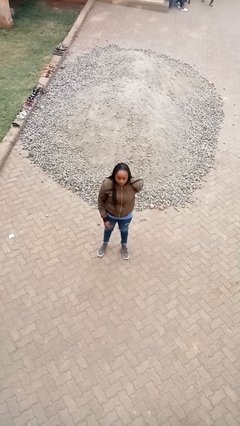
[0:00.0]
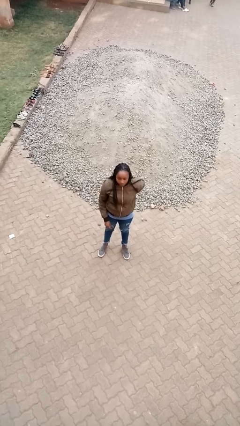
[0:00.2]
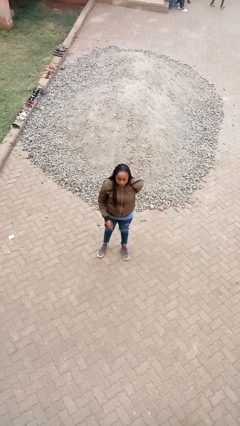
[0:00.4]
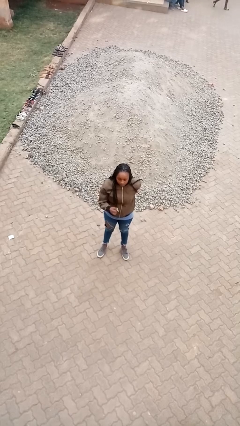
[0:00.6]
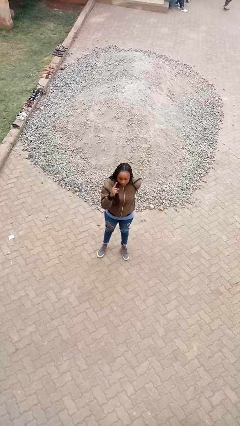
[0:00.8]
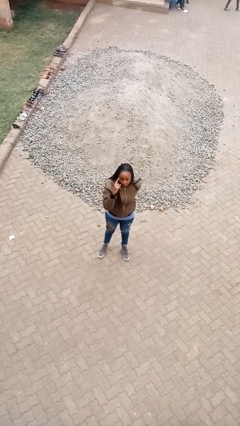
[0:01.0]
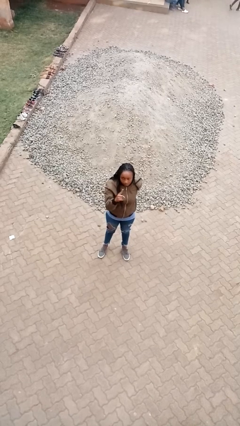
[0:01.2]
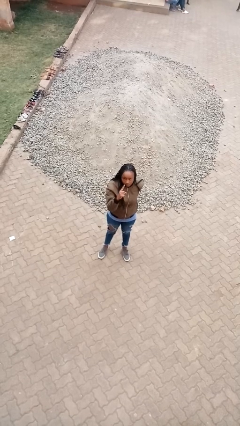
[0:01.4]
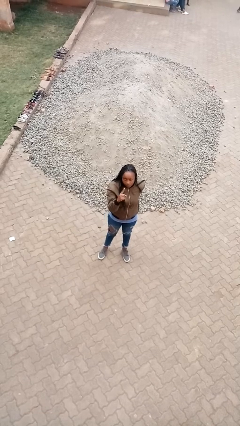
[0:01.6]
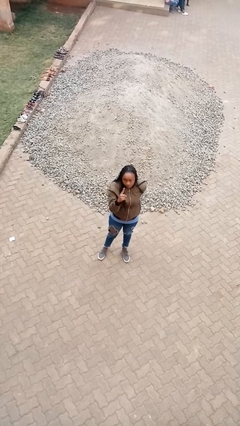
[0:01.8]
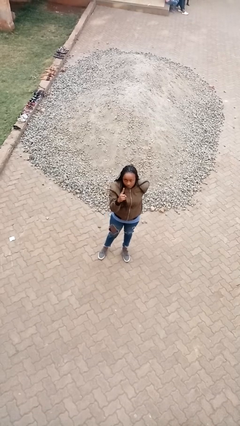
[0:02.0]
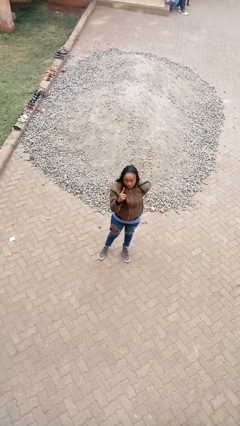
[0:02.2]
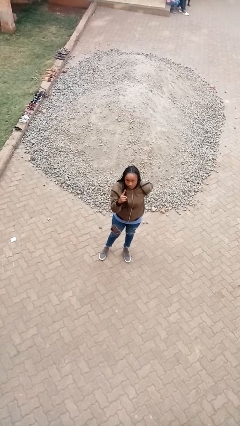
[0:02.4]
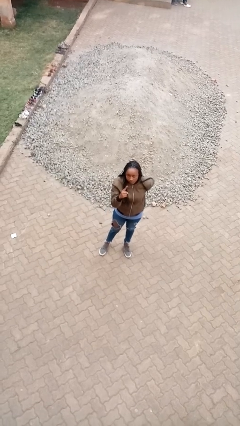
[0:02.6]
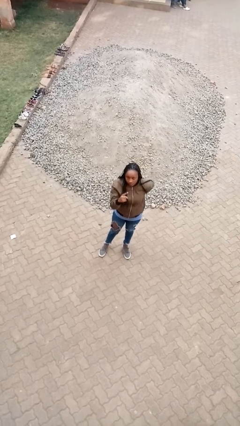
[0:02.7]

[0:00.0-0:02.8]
person gestures number one

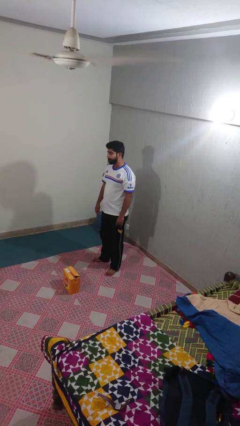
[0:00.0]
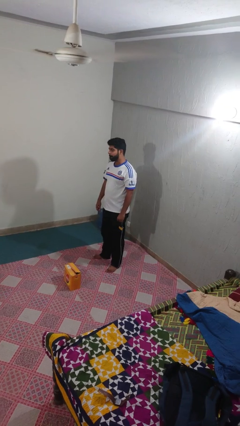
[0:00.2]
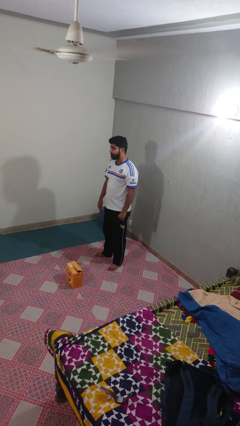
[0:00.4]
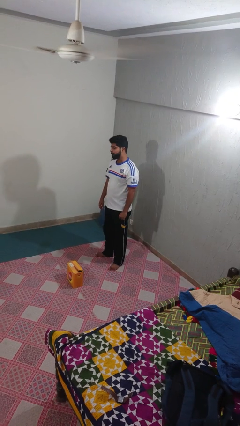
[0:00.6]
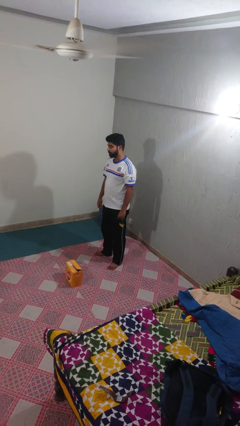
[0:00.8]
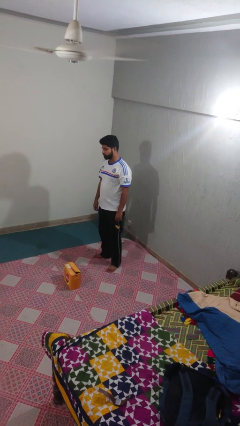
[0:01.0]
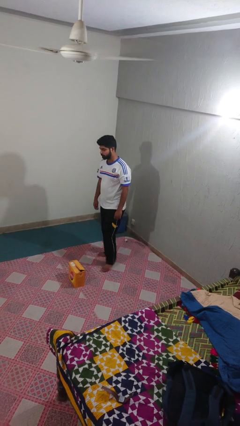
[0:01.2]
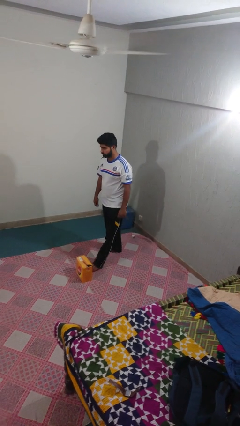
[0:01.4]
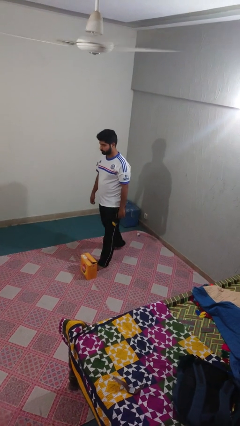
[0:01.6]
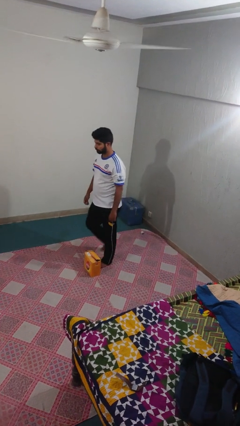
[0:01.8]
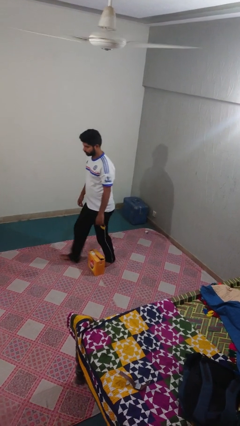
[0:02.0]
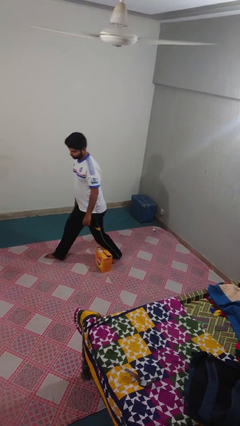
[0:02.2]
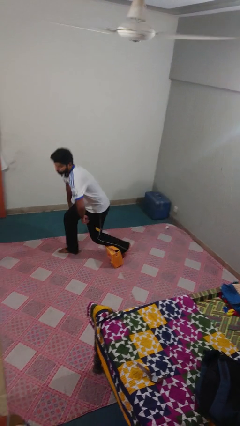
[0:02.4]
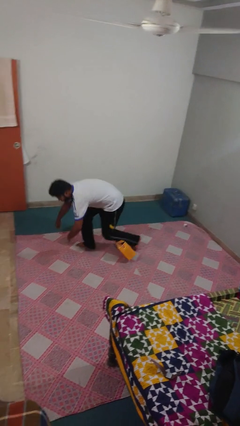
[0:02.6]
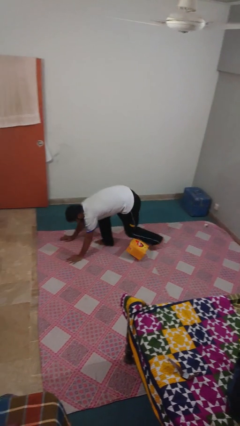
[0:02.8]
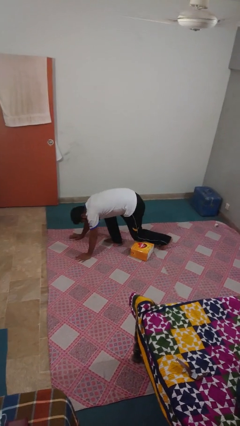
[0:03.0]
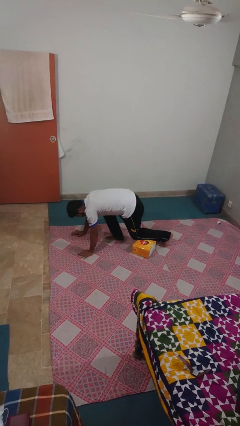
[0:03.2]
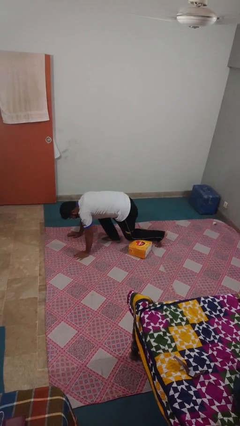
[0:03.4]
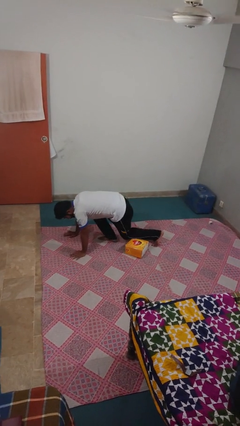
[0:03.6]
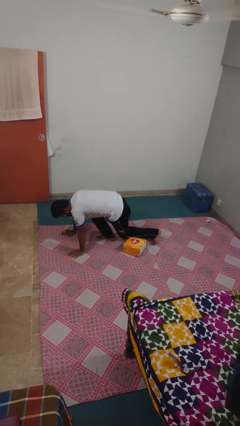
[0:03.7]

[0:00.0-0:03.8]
person trips on object on floor

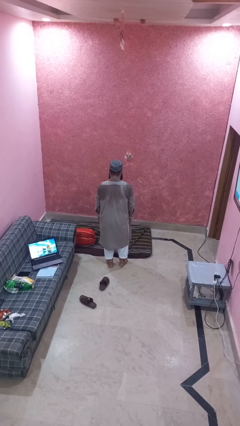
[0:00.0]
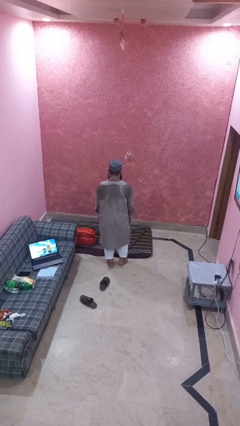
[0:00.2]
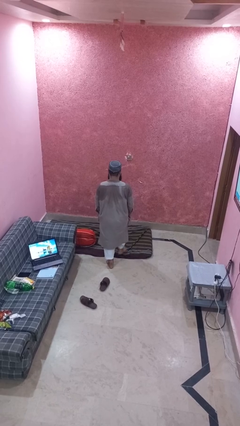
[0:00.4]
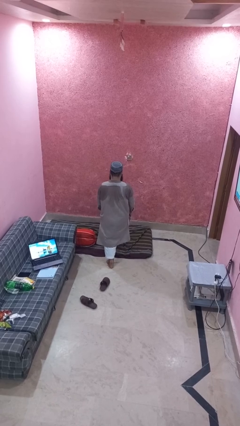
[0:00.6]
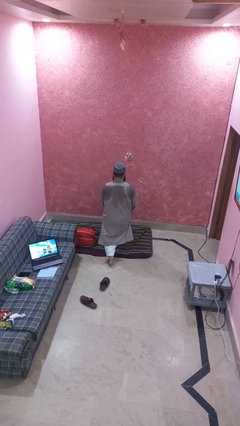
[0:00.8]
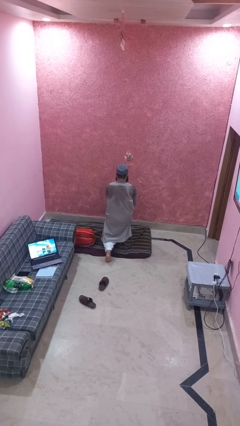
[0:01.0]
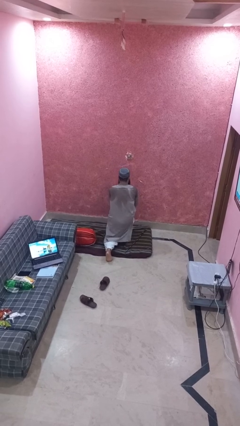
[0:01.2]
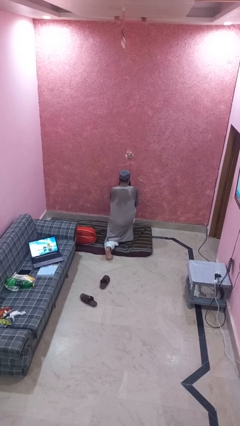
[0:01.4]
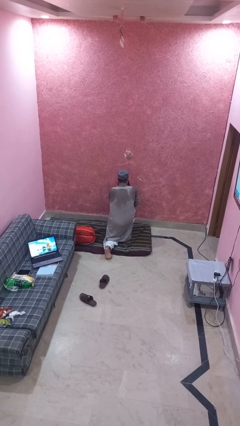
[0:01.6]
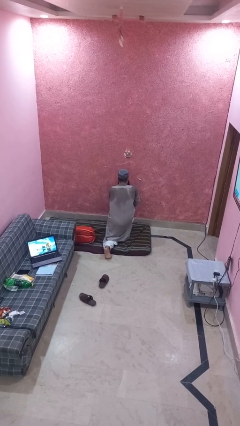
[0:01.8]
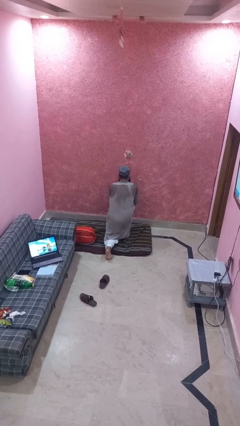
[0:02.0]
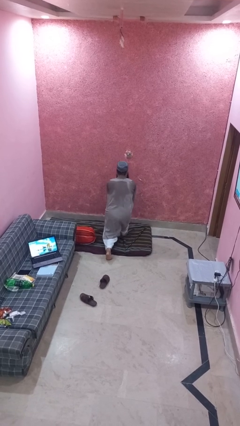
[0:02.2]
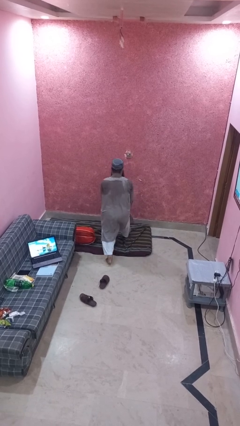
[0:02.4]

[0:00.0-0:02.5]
person exercises with lunges

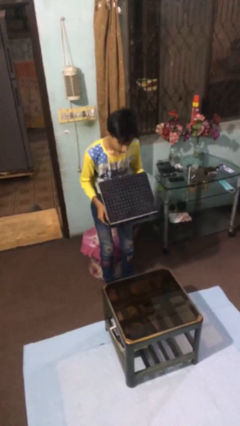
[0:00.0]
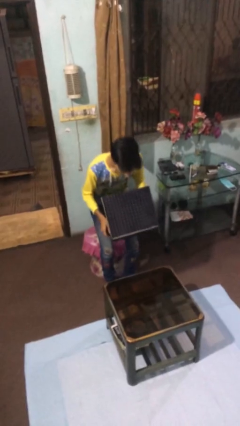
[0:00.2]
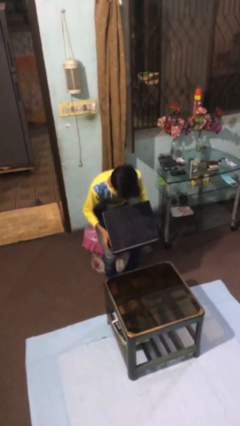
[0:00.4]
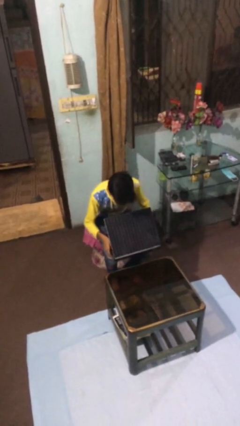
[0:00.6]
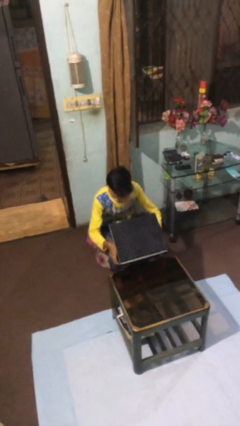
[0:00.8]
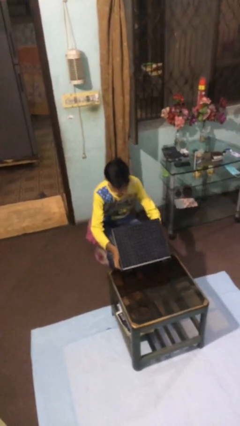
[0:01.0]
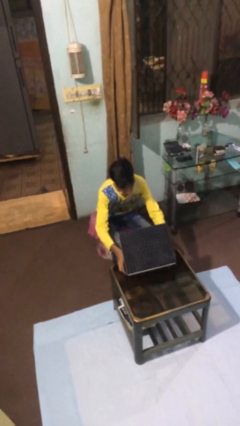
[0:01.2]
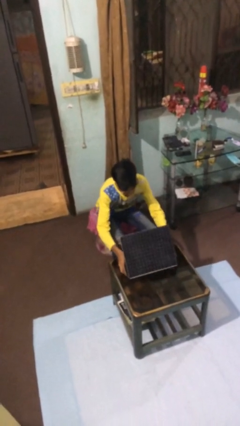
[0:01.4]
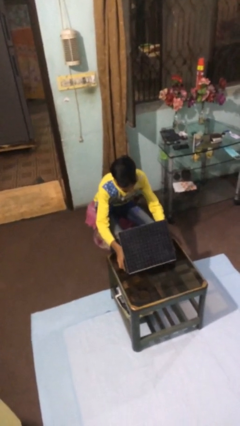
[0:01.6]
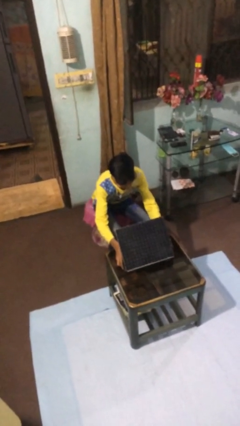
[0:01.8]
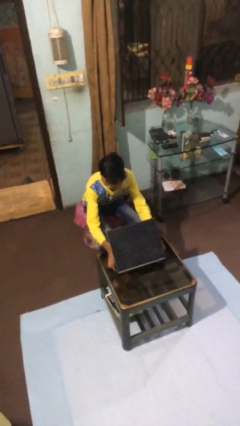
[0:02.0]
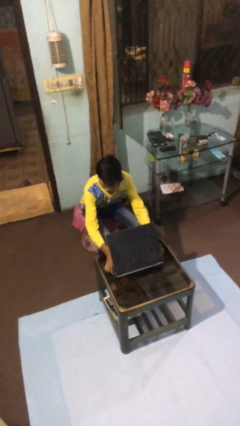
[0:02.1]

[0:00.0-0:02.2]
person sits down

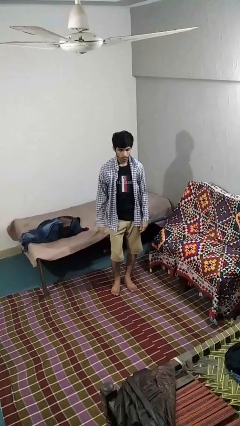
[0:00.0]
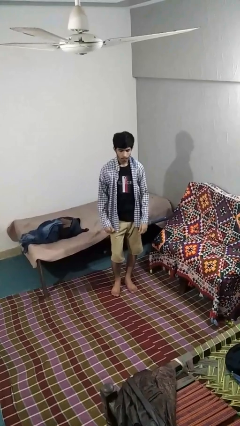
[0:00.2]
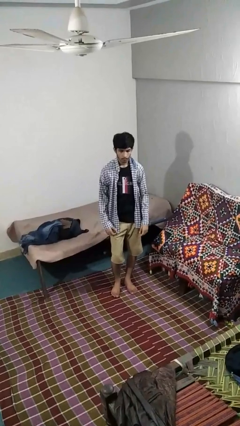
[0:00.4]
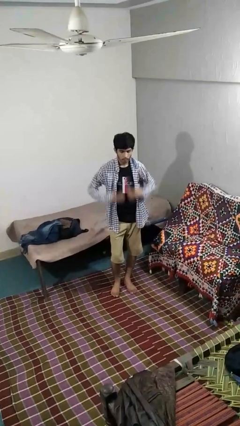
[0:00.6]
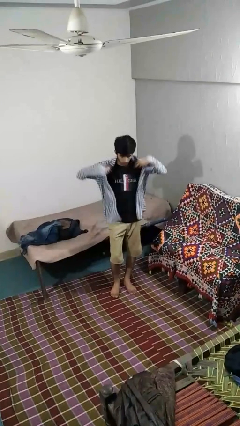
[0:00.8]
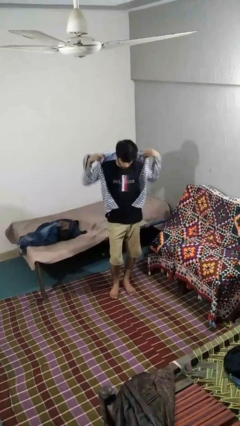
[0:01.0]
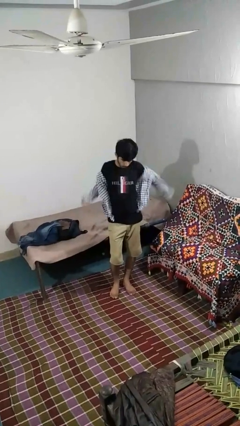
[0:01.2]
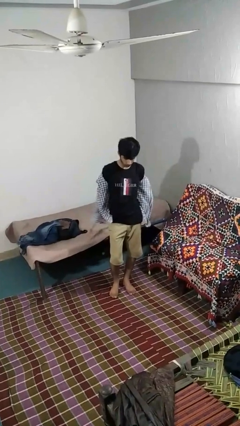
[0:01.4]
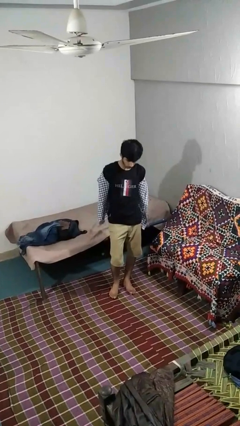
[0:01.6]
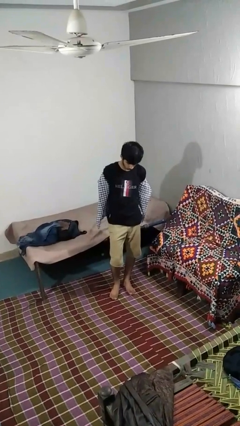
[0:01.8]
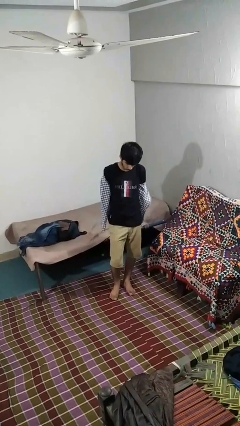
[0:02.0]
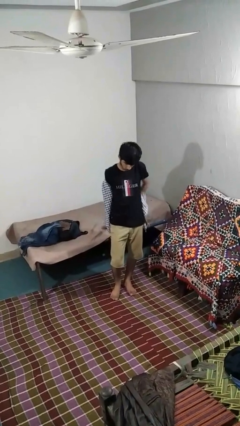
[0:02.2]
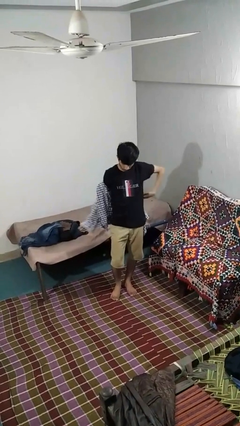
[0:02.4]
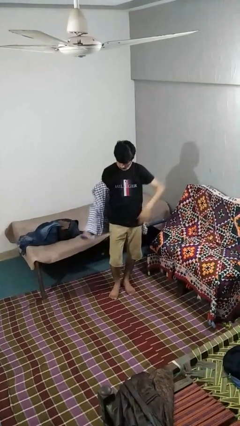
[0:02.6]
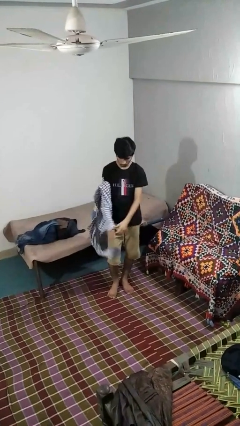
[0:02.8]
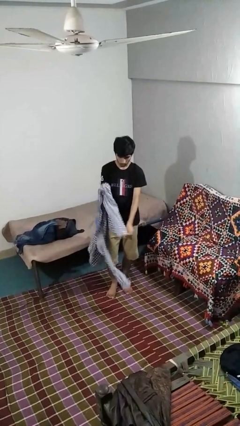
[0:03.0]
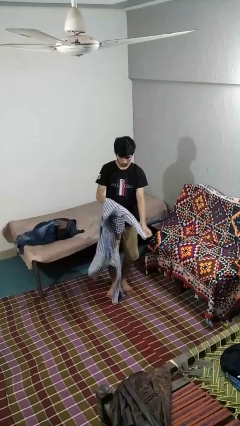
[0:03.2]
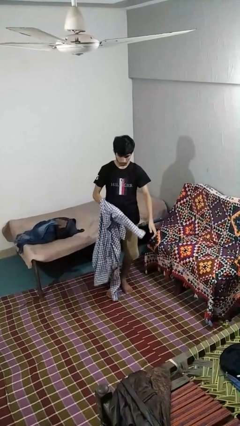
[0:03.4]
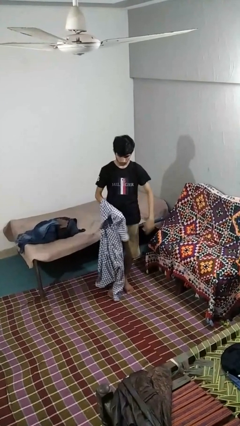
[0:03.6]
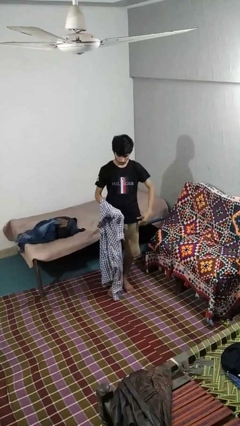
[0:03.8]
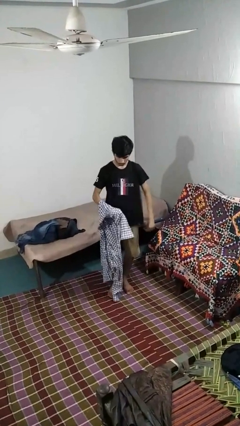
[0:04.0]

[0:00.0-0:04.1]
person takes off shirt

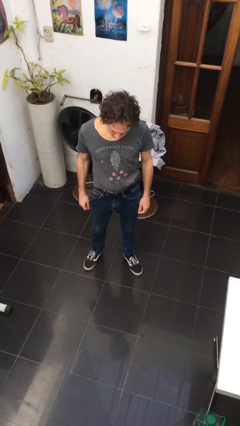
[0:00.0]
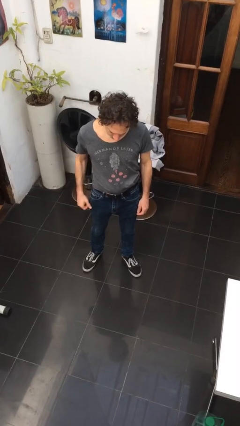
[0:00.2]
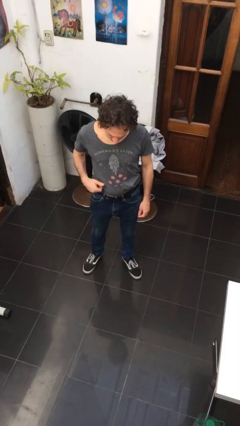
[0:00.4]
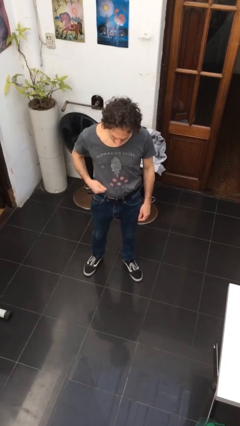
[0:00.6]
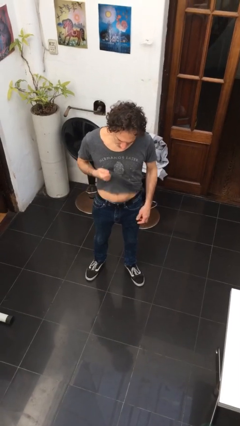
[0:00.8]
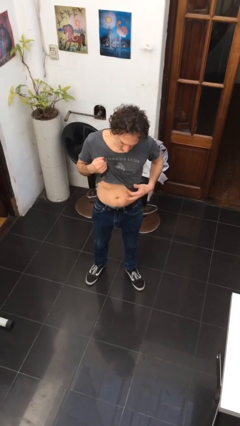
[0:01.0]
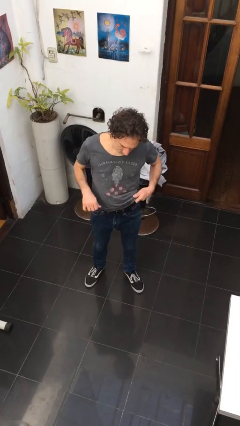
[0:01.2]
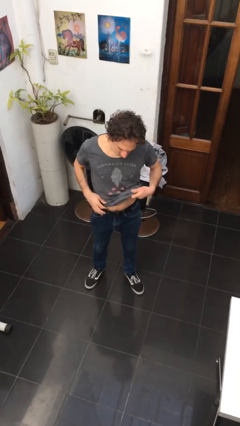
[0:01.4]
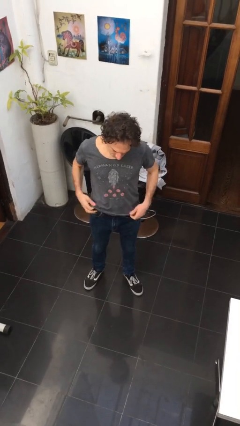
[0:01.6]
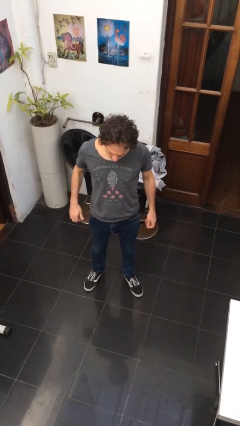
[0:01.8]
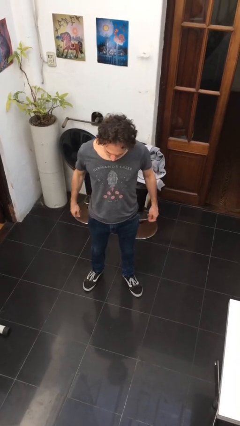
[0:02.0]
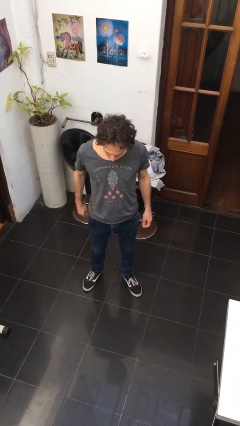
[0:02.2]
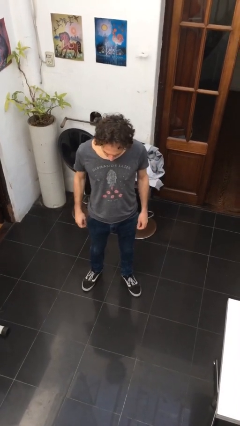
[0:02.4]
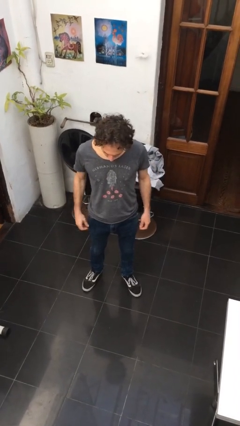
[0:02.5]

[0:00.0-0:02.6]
person untucks shirt
